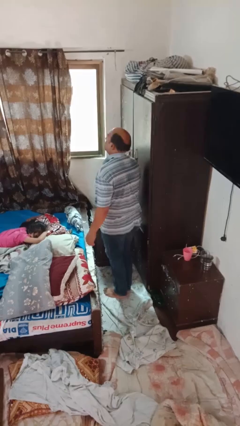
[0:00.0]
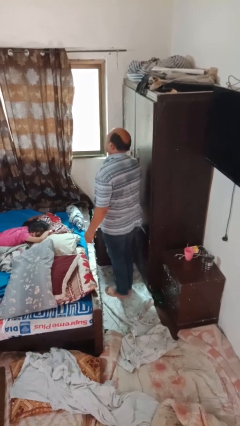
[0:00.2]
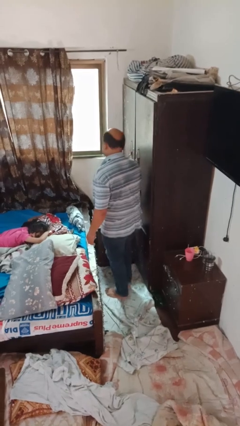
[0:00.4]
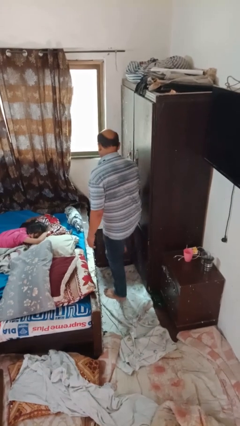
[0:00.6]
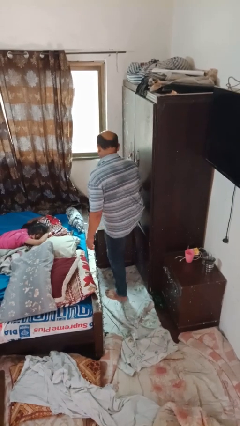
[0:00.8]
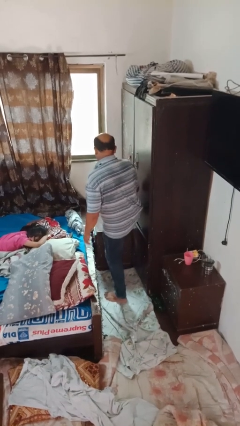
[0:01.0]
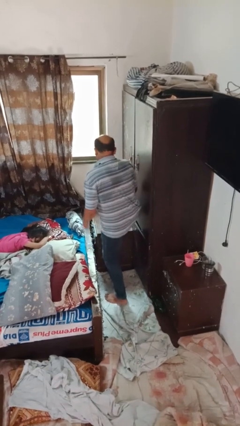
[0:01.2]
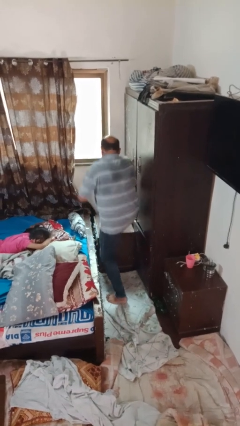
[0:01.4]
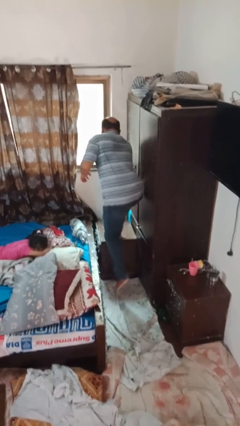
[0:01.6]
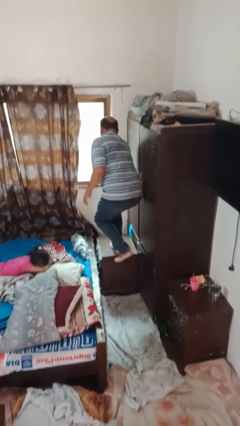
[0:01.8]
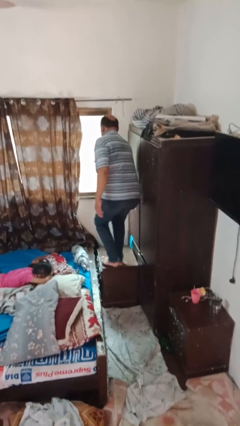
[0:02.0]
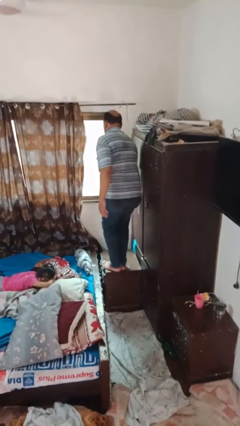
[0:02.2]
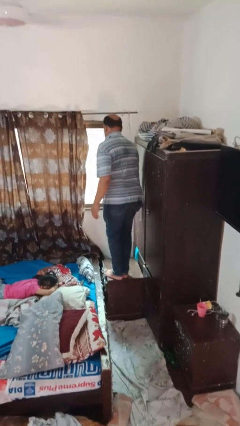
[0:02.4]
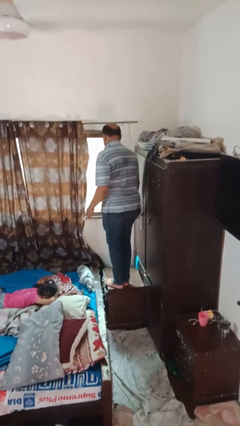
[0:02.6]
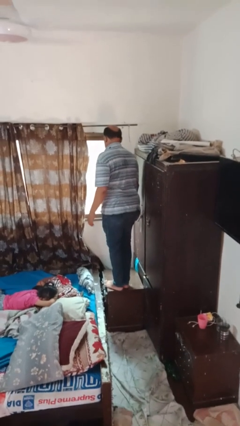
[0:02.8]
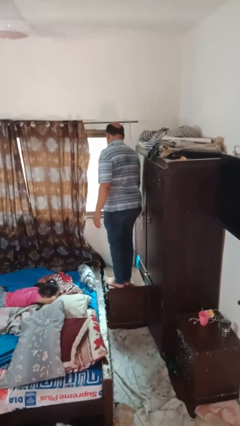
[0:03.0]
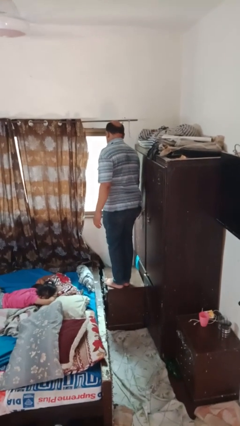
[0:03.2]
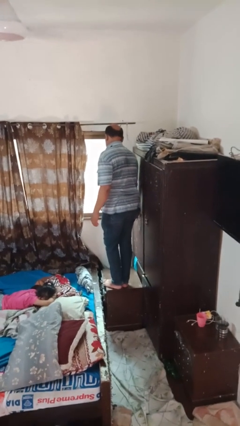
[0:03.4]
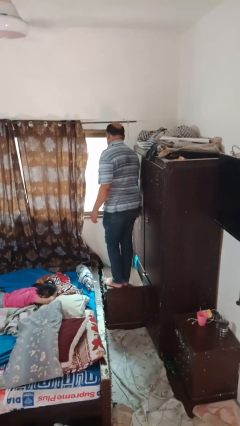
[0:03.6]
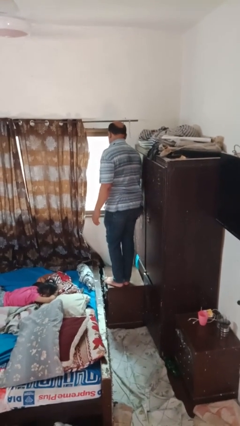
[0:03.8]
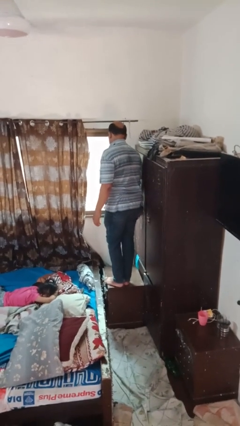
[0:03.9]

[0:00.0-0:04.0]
person climbs on table

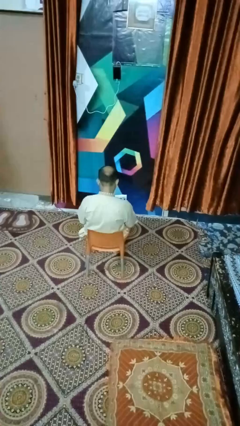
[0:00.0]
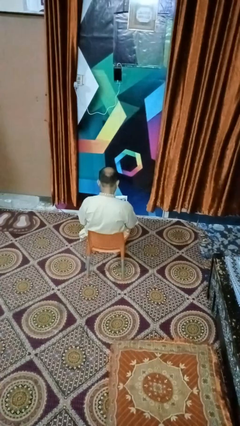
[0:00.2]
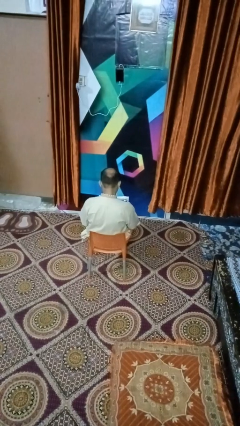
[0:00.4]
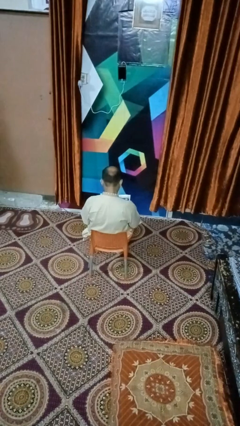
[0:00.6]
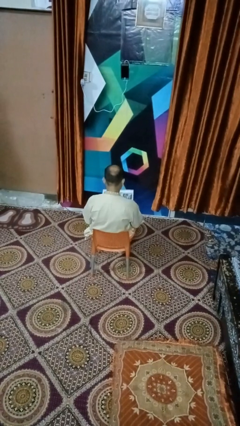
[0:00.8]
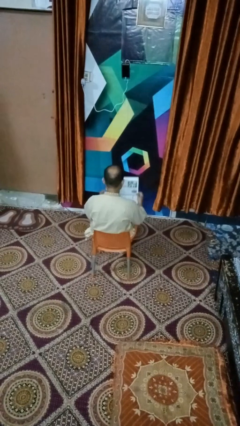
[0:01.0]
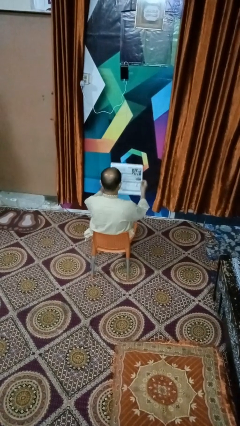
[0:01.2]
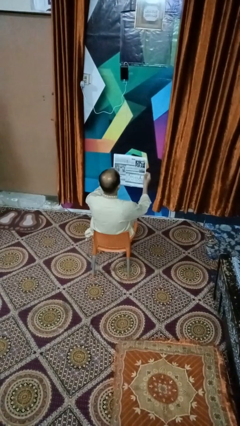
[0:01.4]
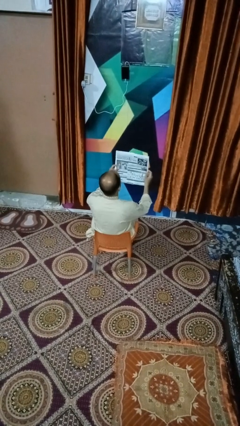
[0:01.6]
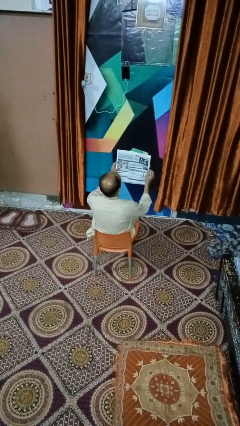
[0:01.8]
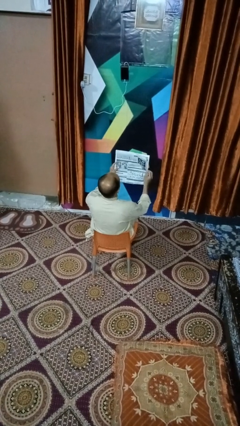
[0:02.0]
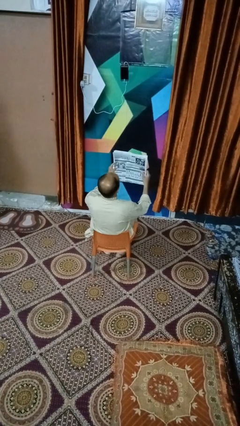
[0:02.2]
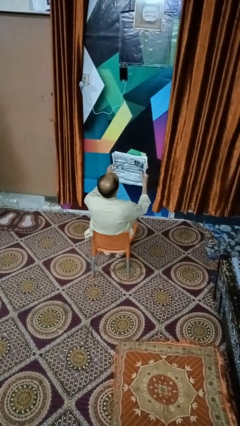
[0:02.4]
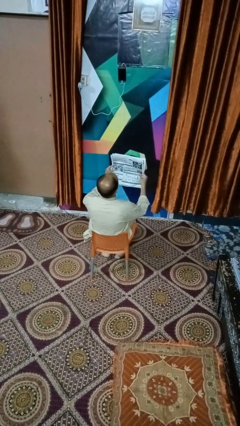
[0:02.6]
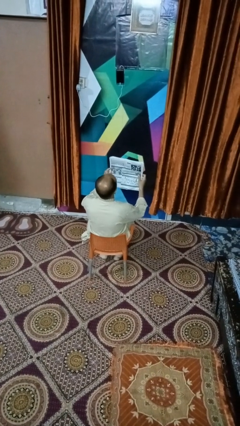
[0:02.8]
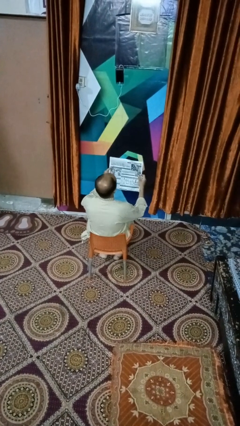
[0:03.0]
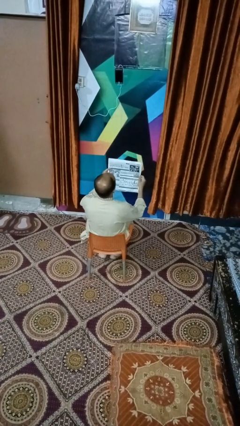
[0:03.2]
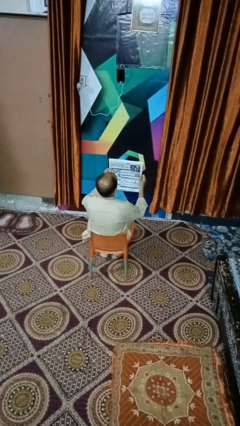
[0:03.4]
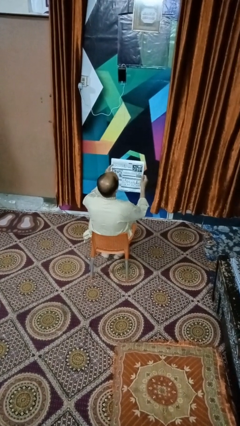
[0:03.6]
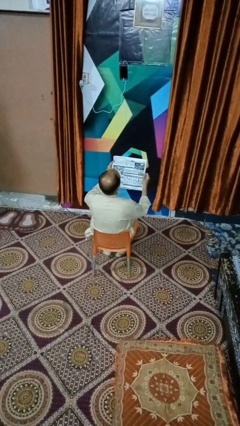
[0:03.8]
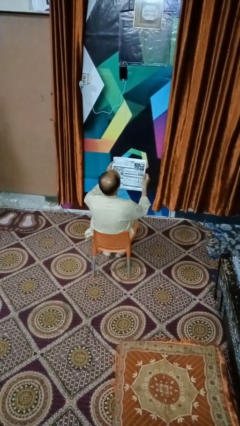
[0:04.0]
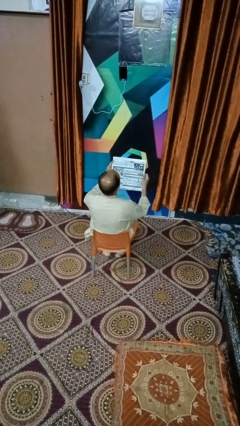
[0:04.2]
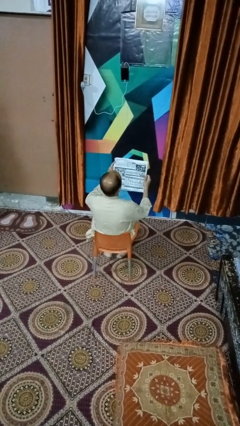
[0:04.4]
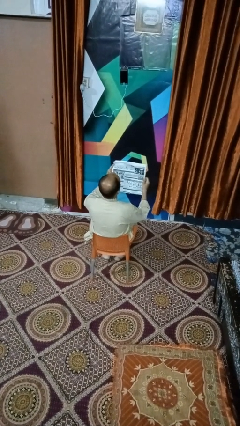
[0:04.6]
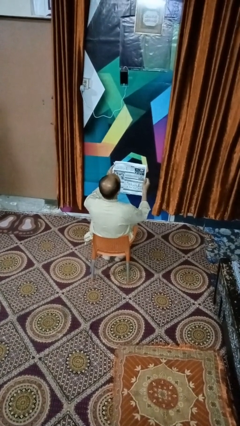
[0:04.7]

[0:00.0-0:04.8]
person reads newspaper

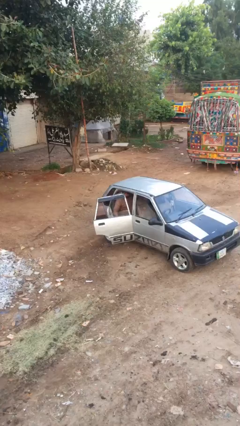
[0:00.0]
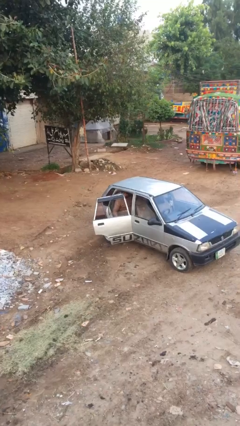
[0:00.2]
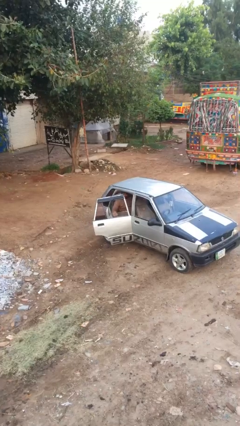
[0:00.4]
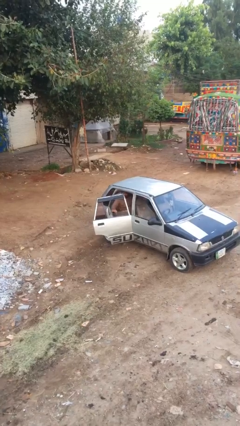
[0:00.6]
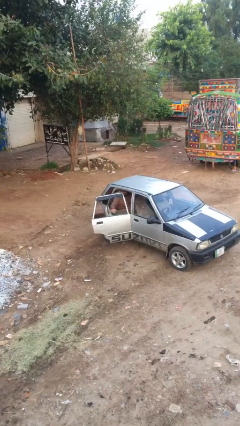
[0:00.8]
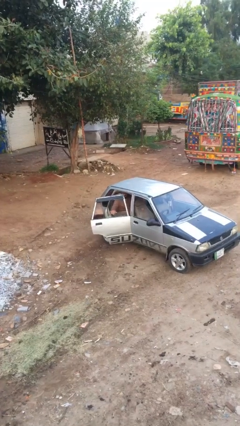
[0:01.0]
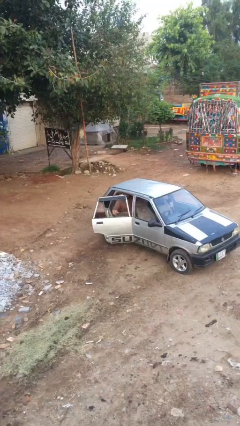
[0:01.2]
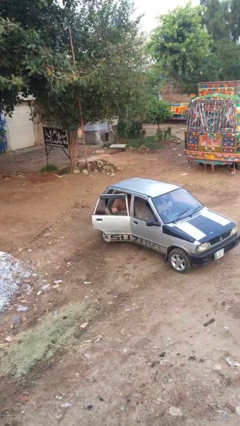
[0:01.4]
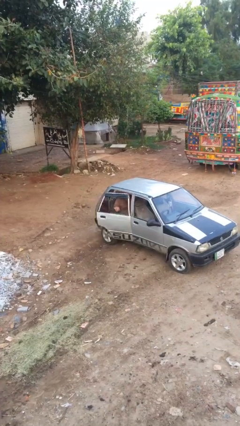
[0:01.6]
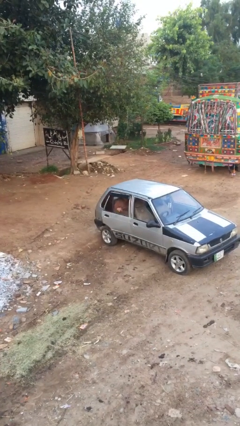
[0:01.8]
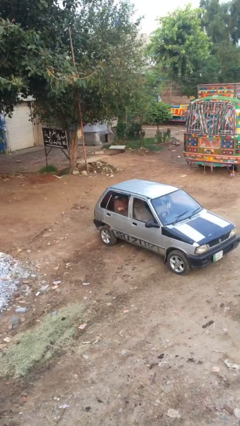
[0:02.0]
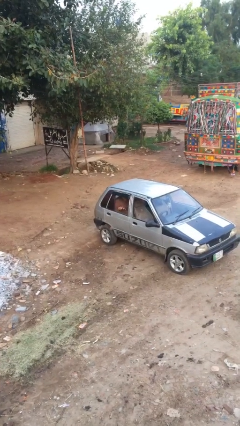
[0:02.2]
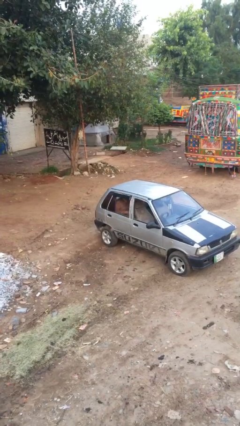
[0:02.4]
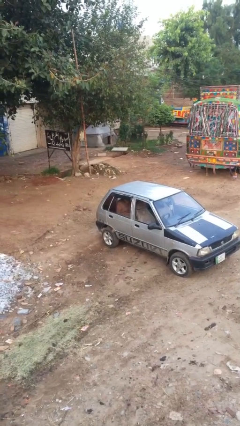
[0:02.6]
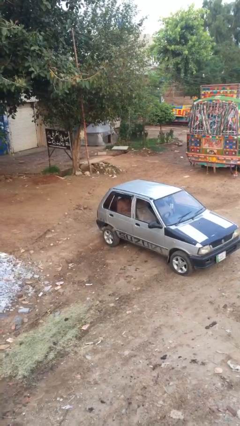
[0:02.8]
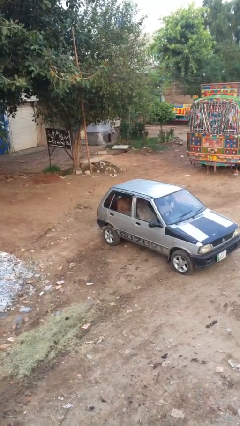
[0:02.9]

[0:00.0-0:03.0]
person closes car door

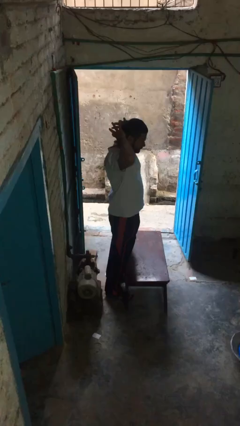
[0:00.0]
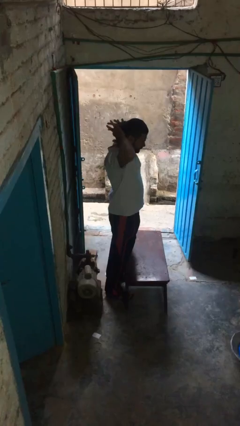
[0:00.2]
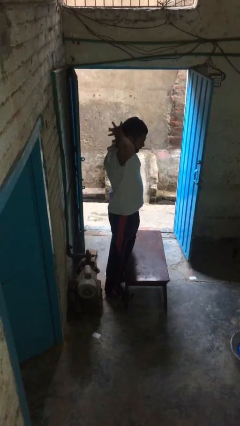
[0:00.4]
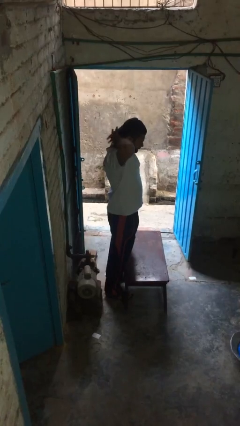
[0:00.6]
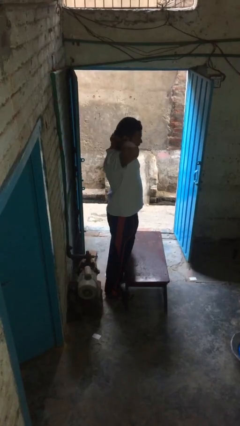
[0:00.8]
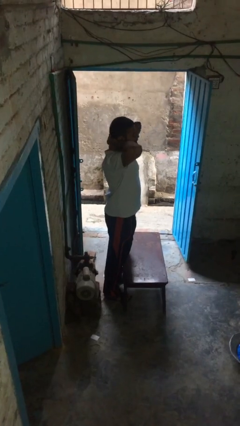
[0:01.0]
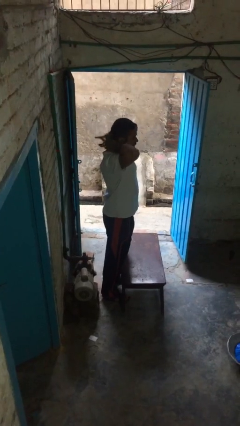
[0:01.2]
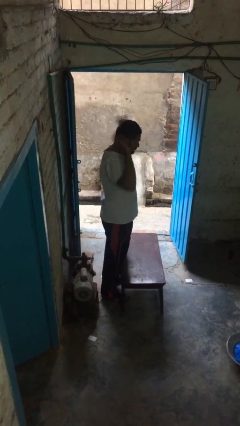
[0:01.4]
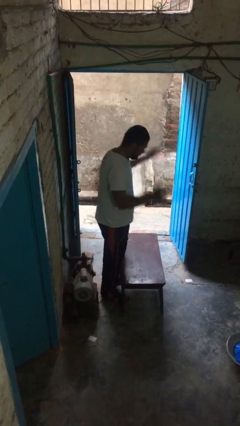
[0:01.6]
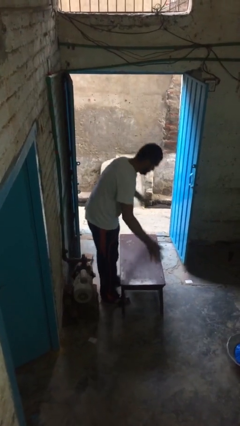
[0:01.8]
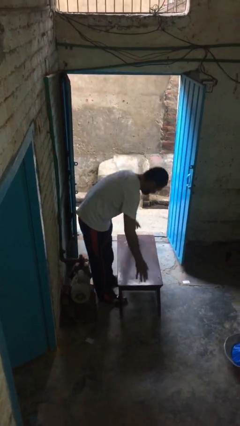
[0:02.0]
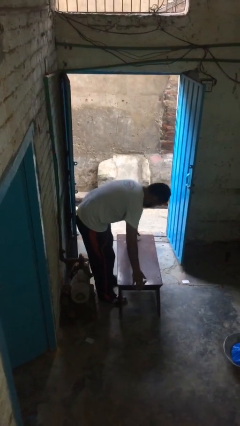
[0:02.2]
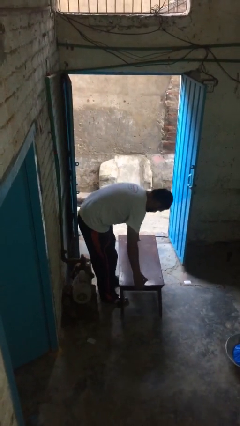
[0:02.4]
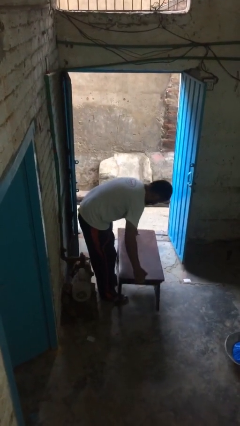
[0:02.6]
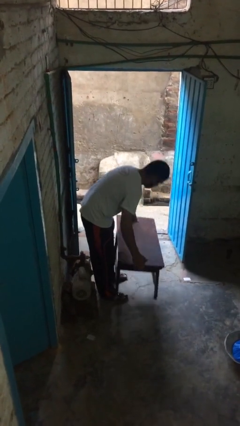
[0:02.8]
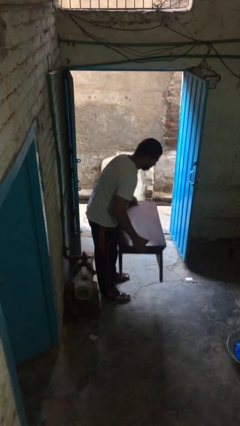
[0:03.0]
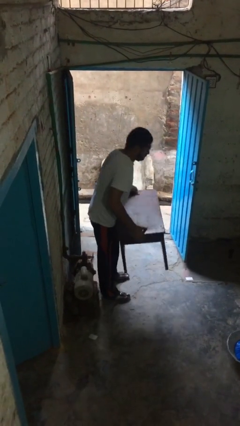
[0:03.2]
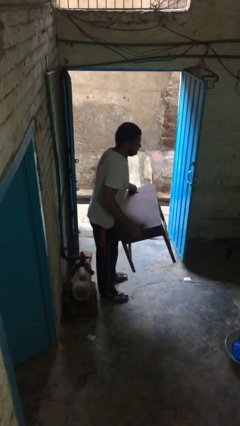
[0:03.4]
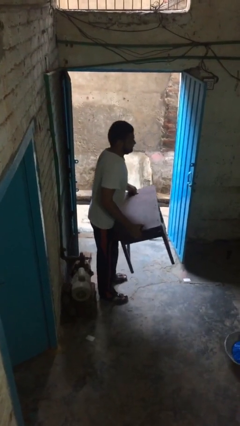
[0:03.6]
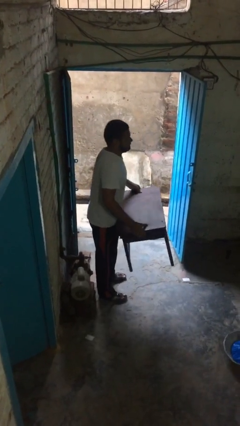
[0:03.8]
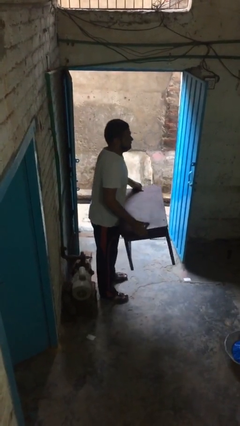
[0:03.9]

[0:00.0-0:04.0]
person picks up object from floor

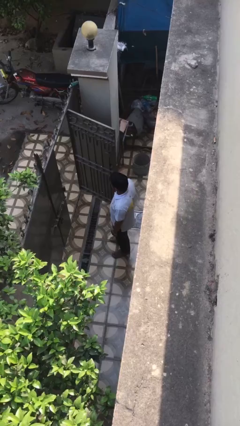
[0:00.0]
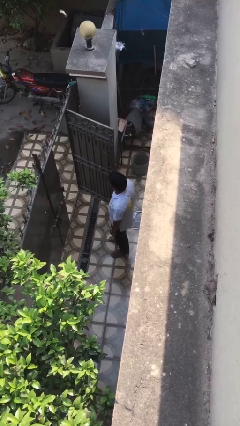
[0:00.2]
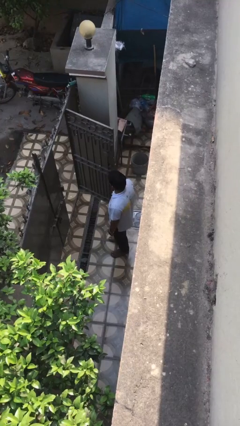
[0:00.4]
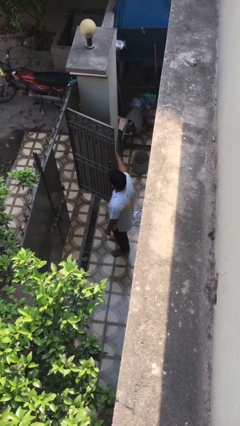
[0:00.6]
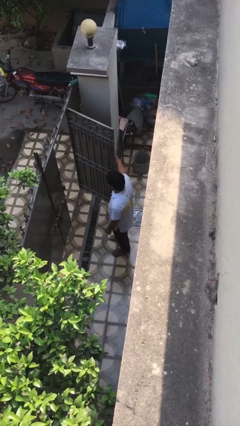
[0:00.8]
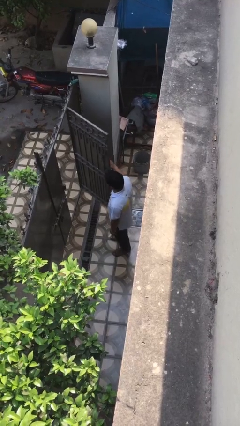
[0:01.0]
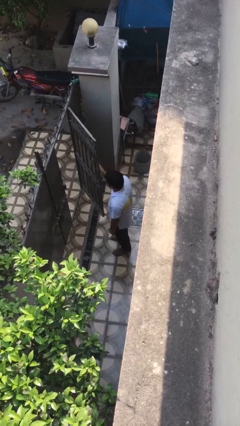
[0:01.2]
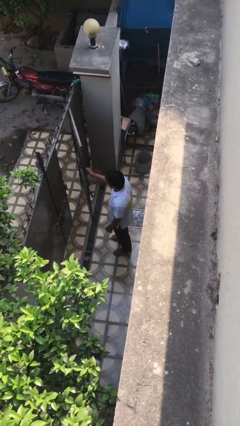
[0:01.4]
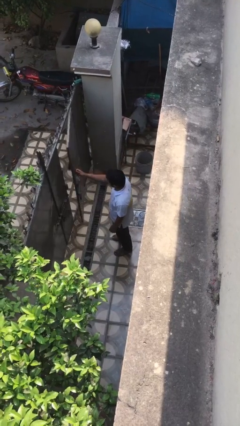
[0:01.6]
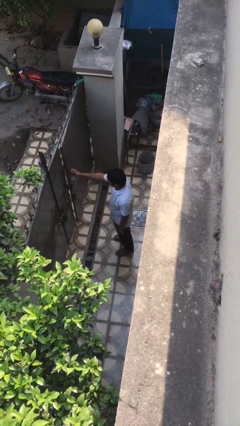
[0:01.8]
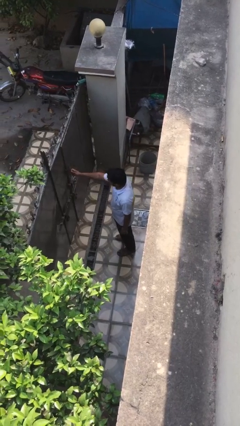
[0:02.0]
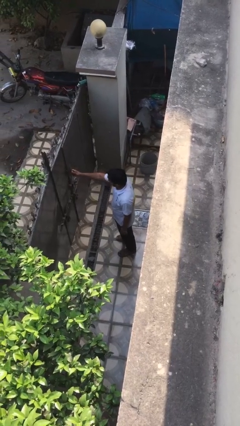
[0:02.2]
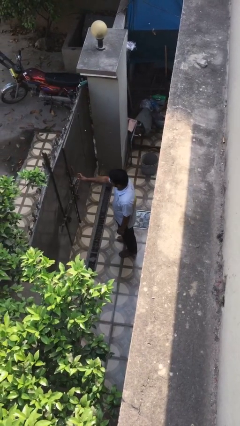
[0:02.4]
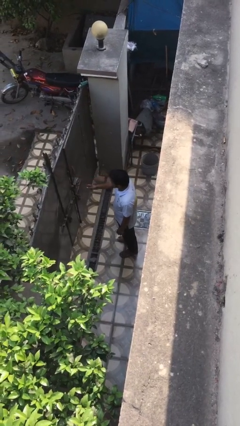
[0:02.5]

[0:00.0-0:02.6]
person closes facility door
